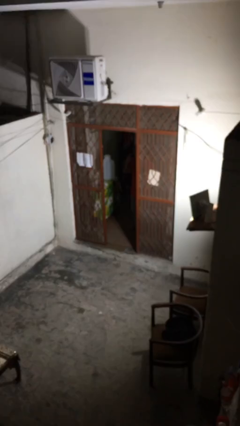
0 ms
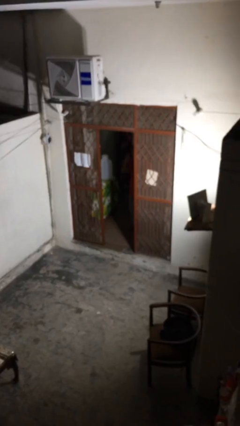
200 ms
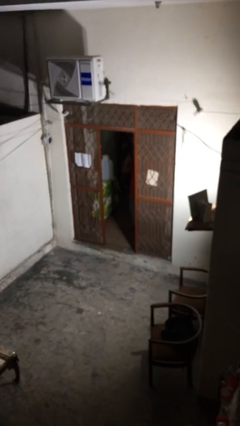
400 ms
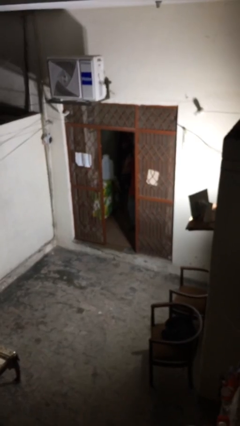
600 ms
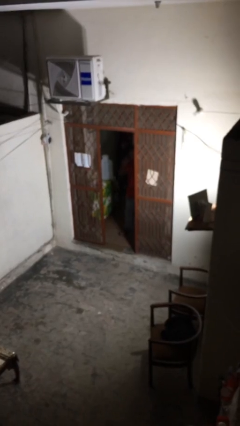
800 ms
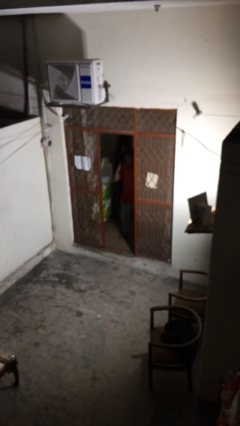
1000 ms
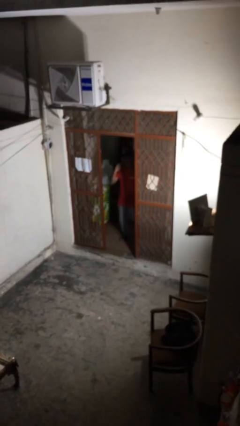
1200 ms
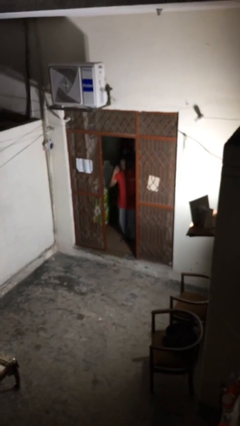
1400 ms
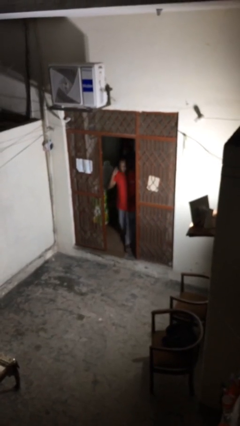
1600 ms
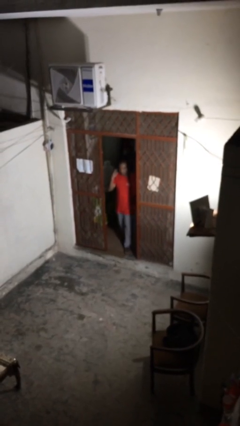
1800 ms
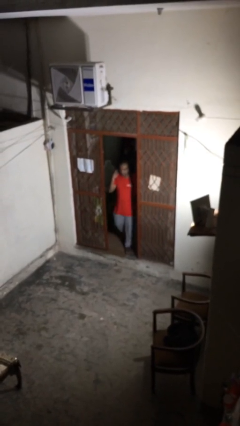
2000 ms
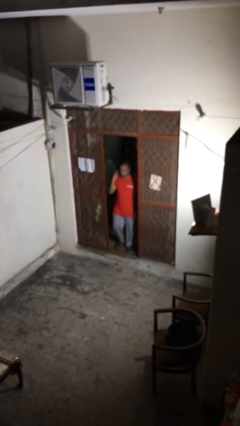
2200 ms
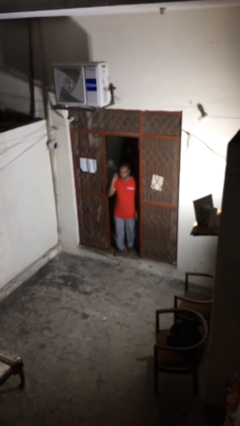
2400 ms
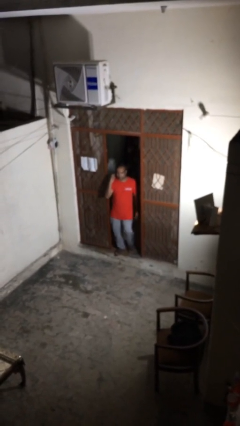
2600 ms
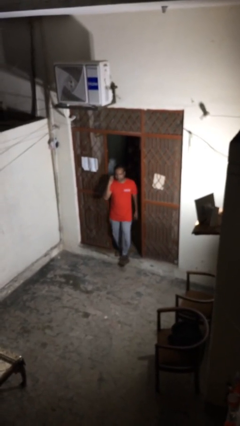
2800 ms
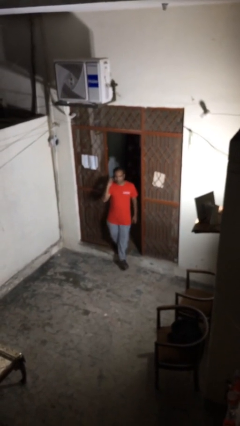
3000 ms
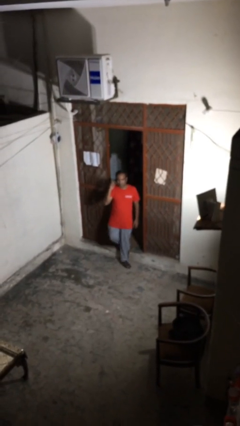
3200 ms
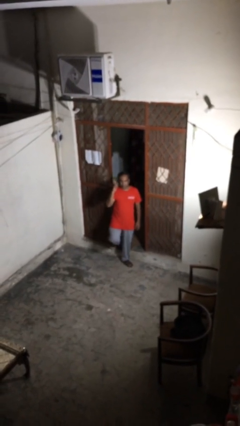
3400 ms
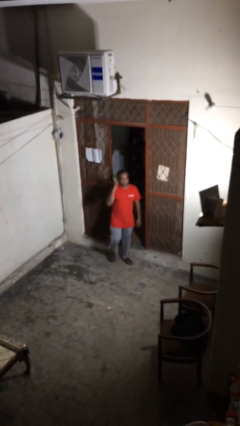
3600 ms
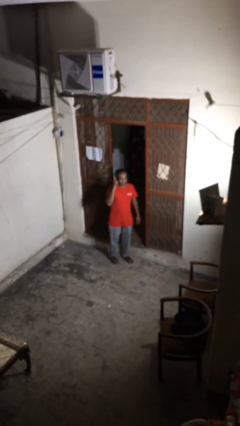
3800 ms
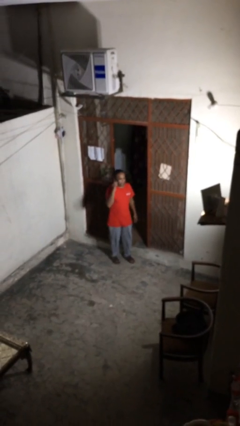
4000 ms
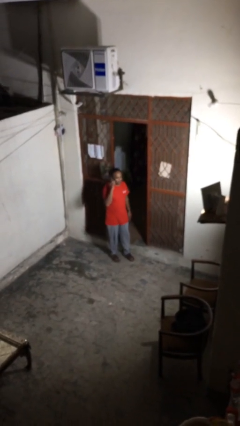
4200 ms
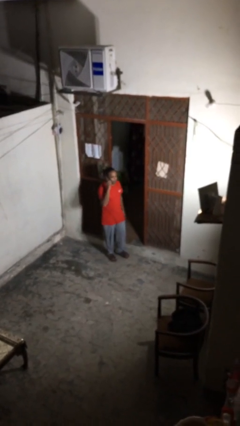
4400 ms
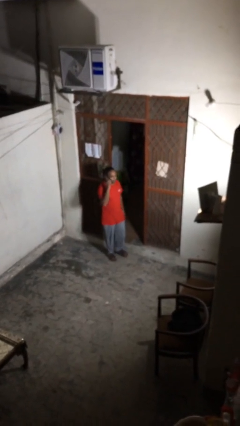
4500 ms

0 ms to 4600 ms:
person enters scene through structure

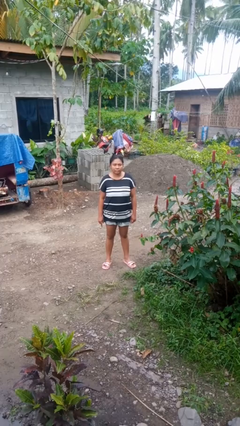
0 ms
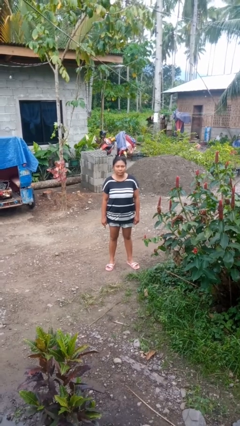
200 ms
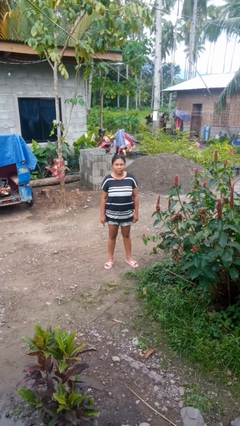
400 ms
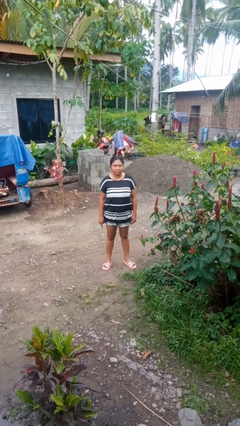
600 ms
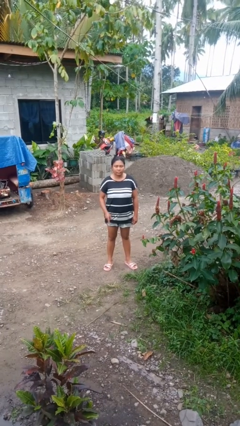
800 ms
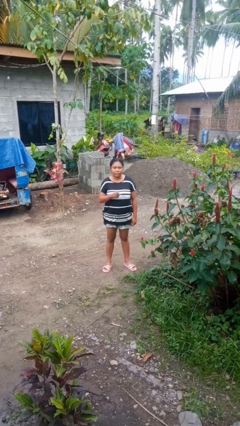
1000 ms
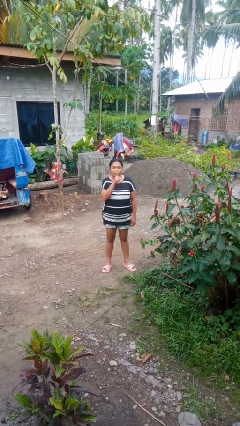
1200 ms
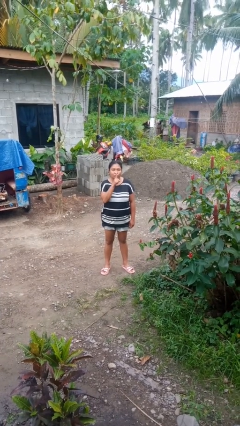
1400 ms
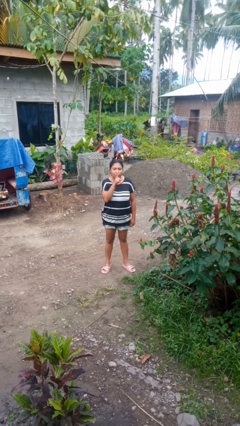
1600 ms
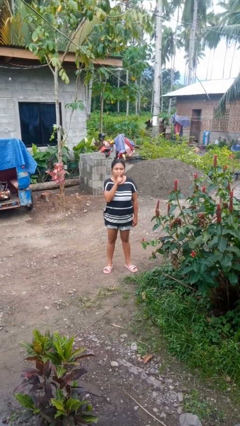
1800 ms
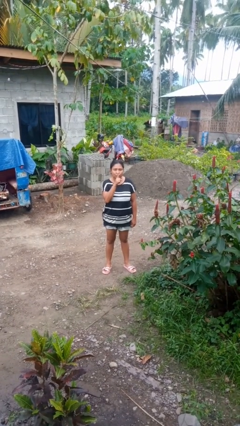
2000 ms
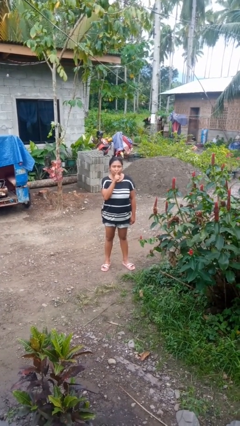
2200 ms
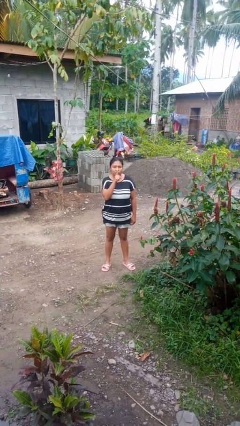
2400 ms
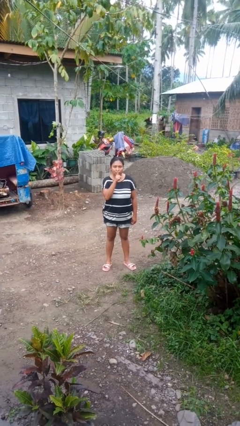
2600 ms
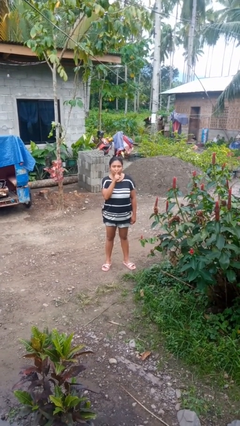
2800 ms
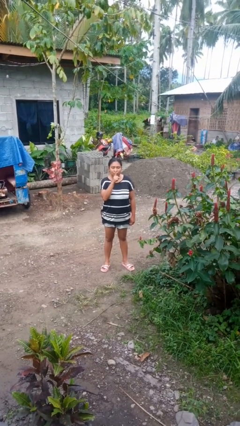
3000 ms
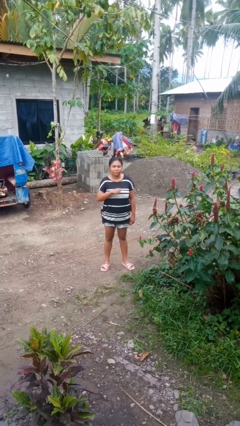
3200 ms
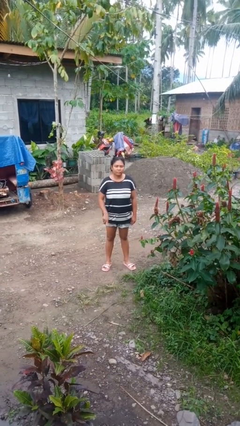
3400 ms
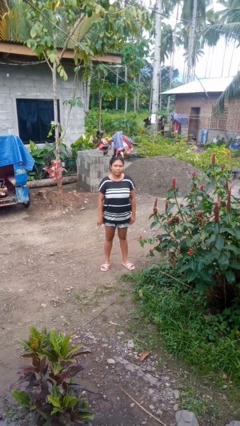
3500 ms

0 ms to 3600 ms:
person gestures be quiet

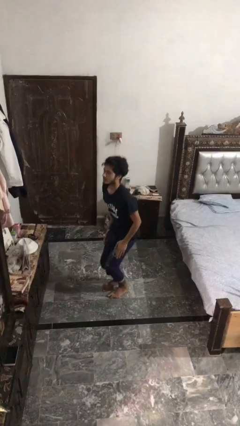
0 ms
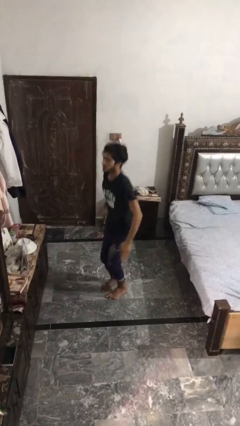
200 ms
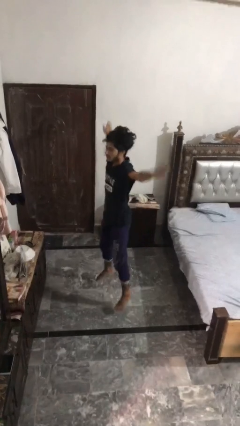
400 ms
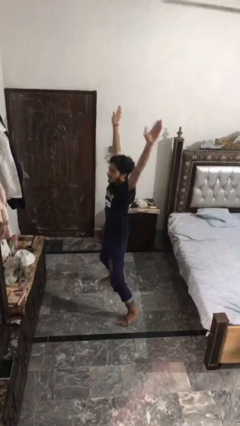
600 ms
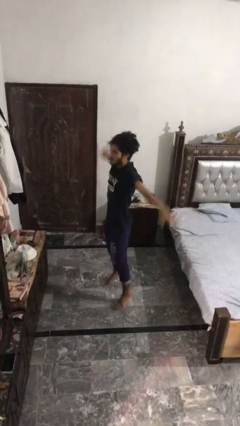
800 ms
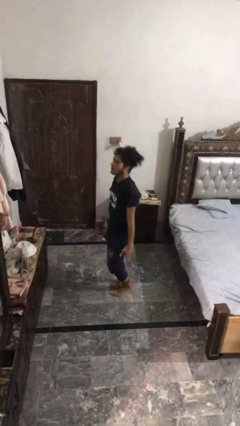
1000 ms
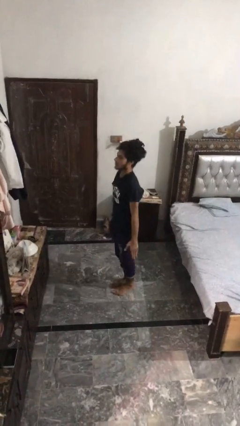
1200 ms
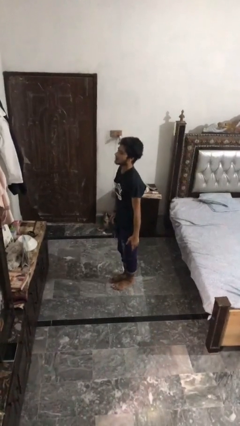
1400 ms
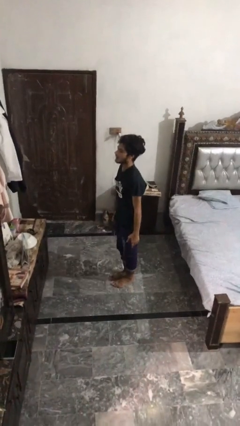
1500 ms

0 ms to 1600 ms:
person exercises with jumping jacks

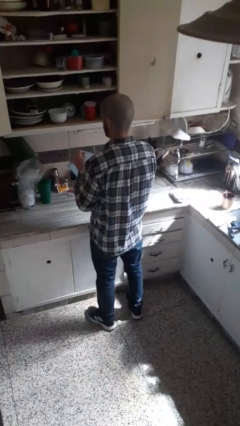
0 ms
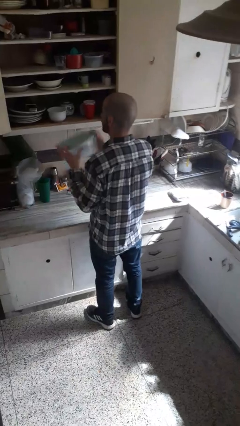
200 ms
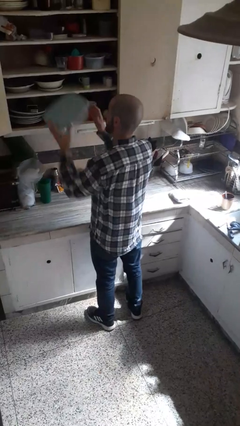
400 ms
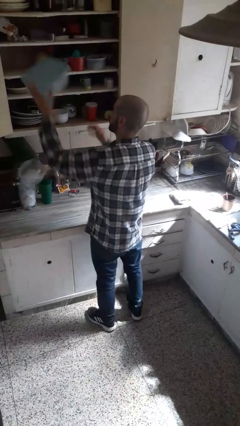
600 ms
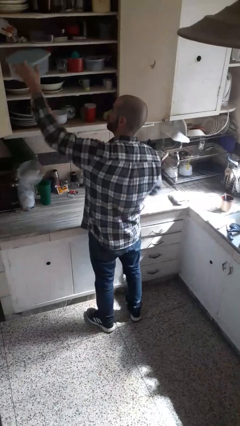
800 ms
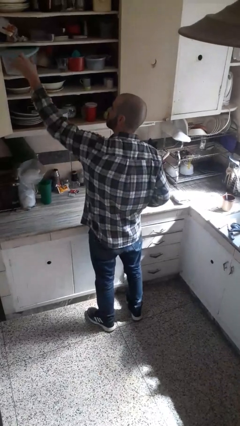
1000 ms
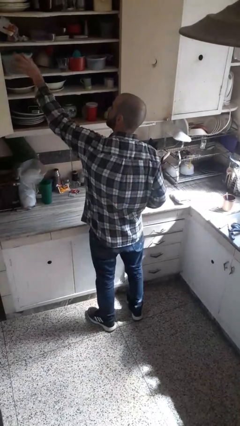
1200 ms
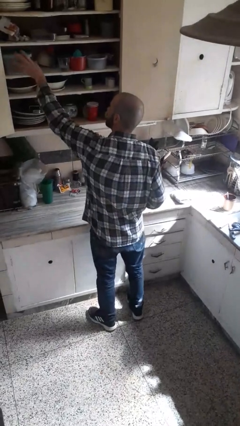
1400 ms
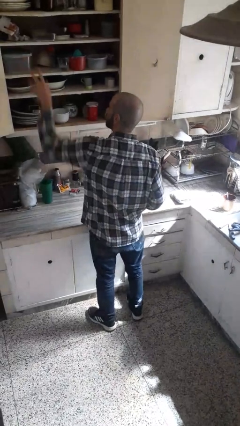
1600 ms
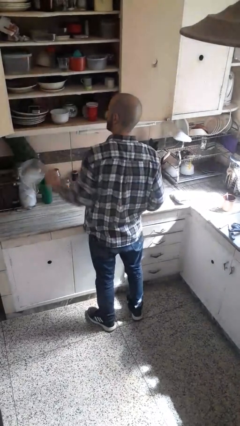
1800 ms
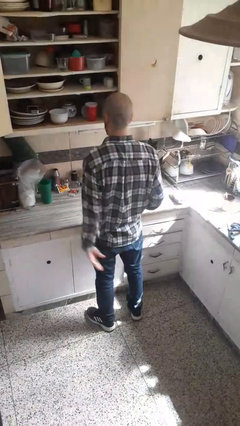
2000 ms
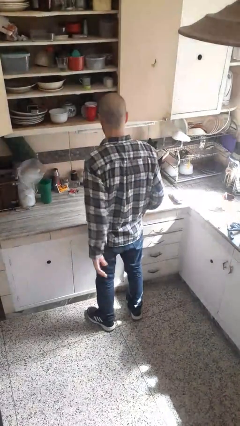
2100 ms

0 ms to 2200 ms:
person puts down object into cabinet

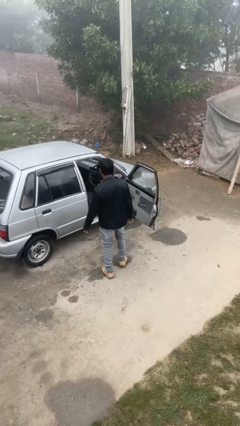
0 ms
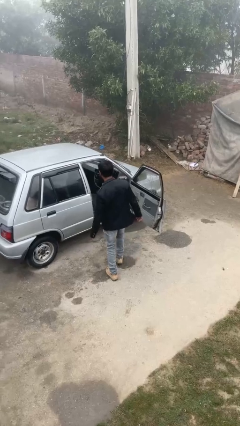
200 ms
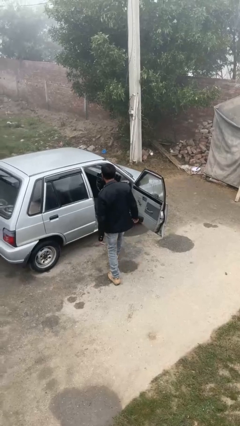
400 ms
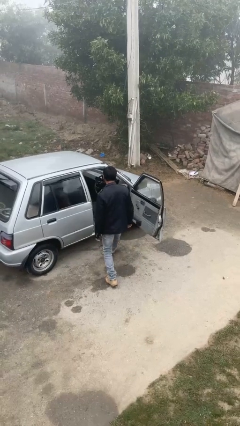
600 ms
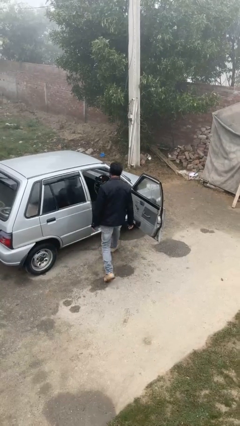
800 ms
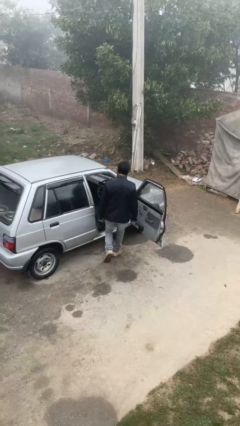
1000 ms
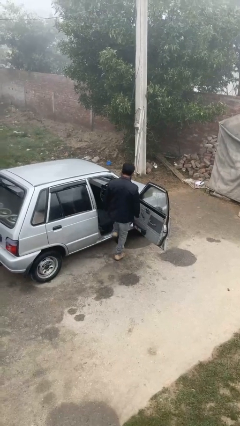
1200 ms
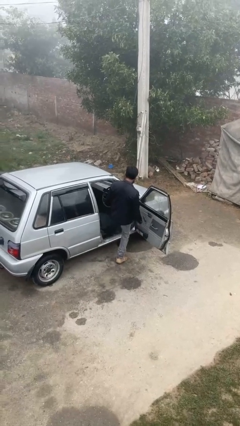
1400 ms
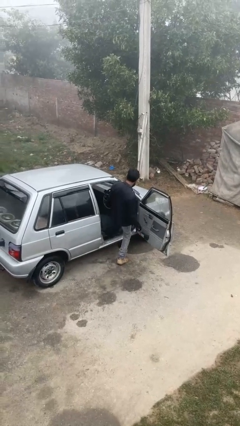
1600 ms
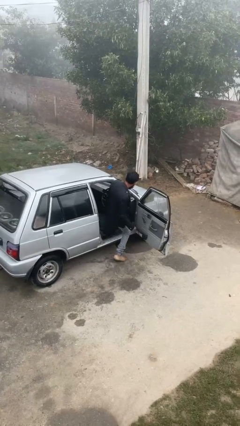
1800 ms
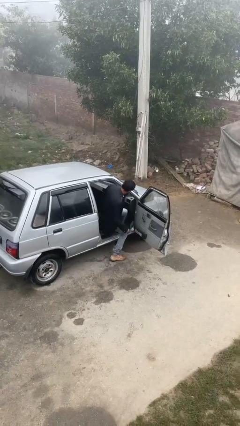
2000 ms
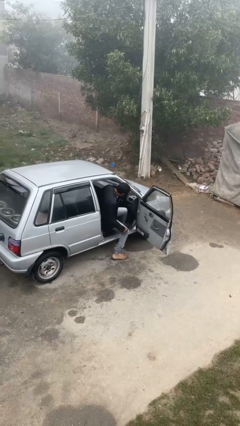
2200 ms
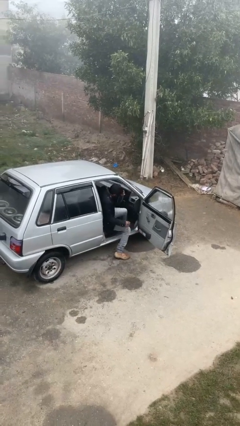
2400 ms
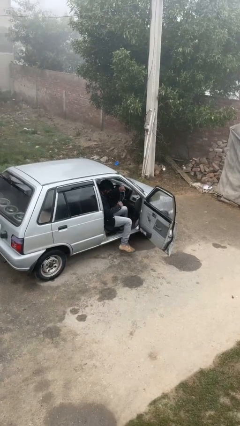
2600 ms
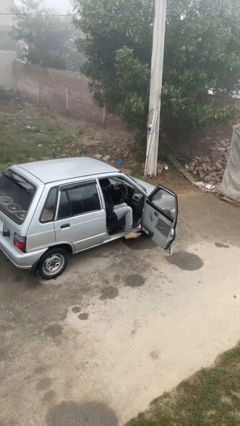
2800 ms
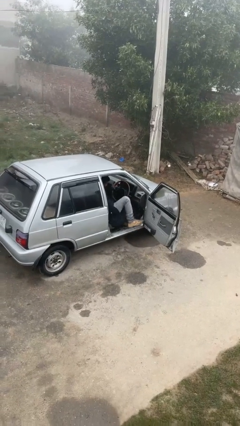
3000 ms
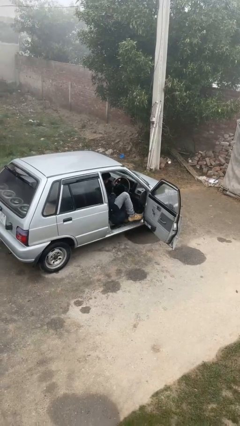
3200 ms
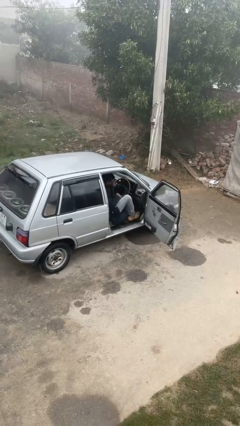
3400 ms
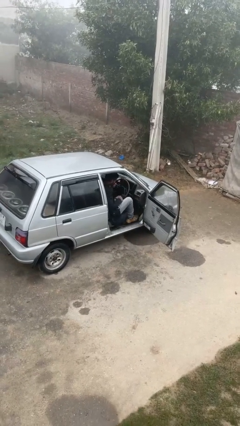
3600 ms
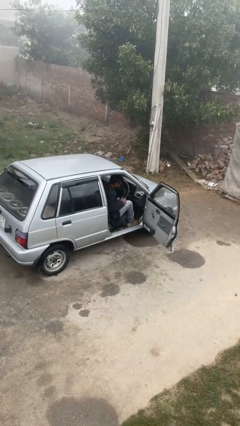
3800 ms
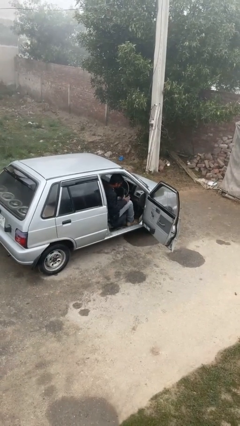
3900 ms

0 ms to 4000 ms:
person enters car

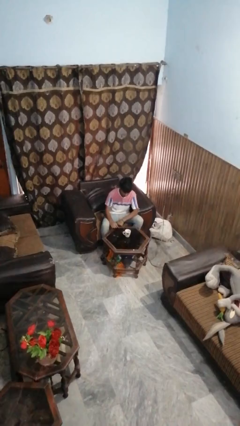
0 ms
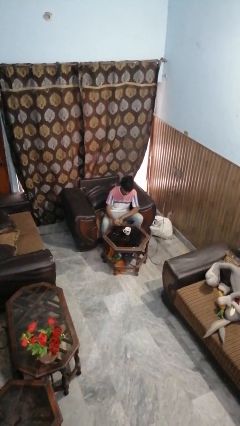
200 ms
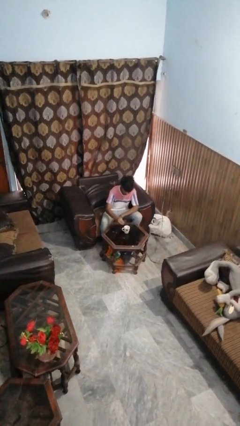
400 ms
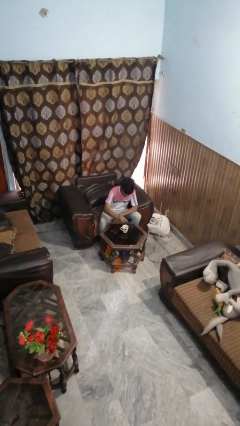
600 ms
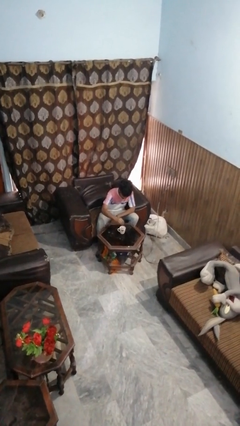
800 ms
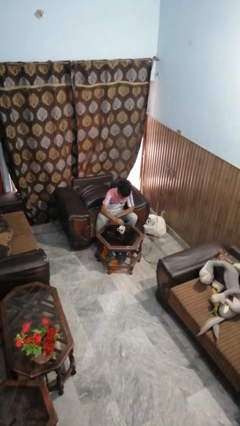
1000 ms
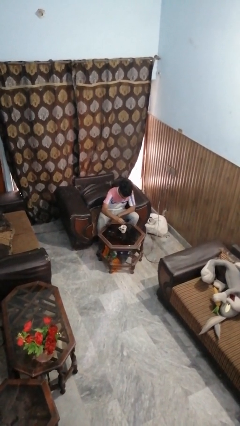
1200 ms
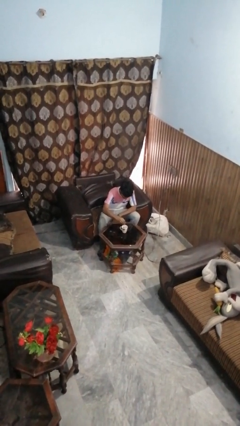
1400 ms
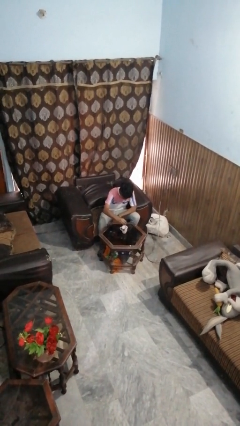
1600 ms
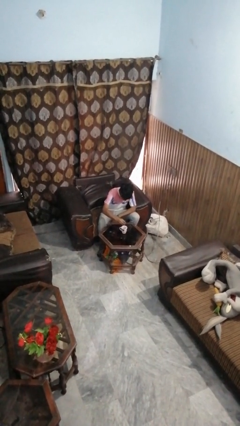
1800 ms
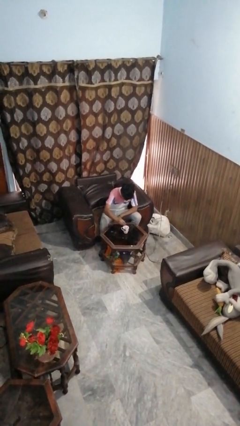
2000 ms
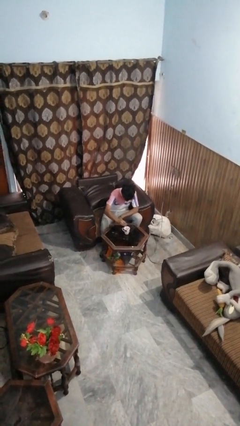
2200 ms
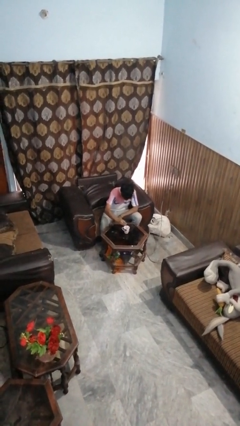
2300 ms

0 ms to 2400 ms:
person stirs mug
